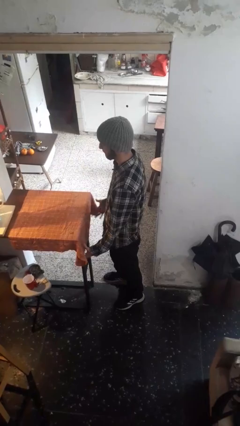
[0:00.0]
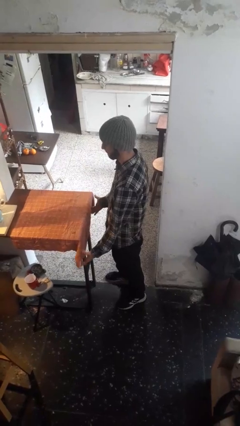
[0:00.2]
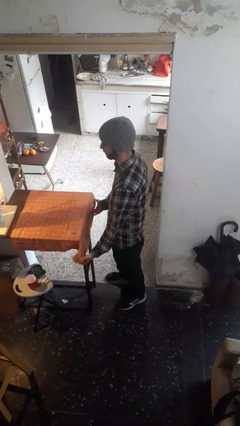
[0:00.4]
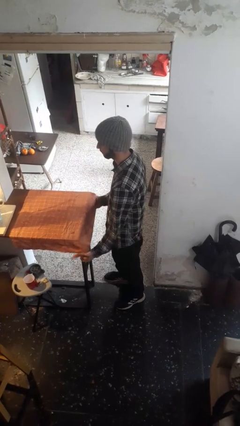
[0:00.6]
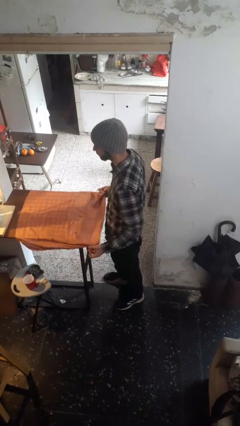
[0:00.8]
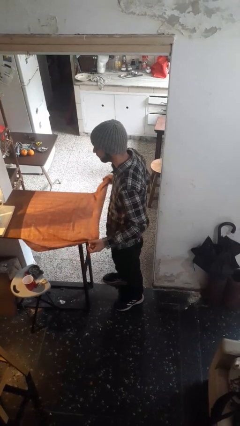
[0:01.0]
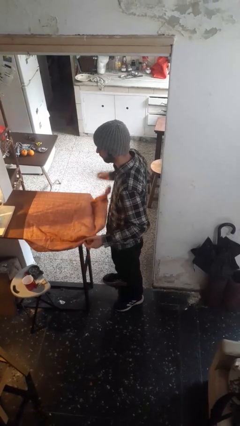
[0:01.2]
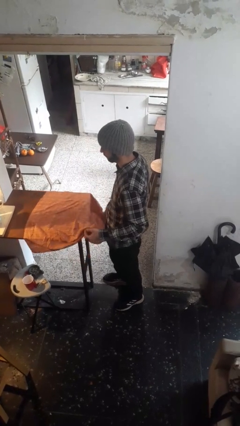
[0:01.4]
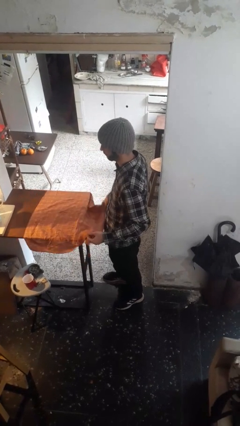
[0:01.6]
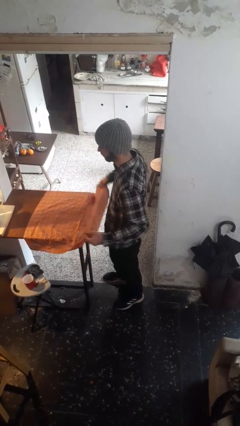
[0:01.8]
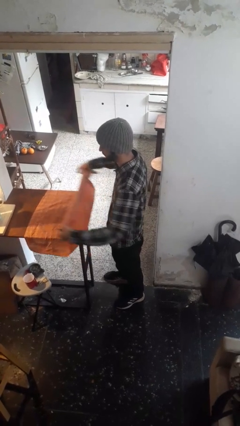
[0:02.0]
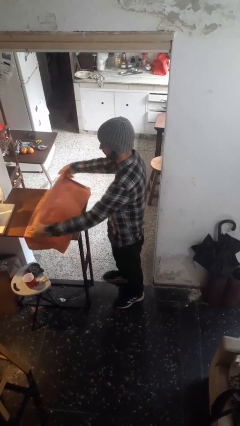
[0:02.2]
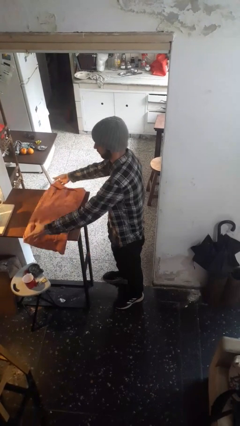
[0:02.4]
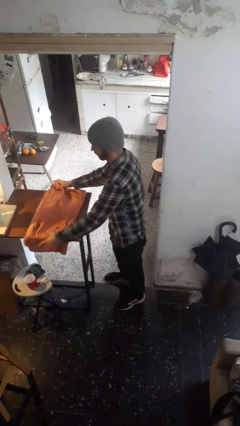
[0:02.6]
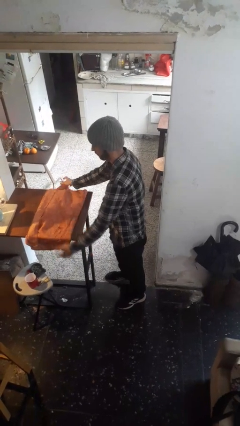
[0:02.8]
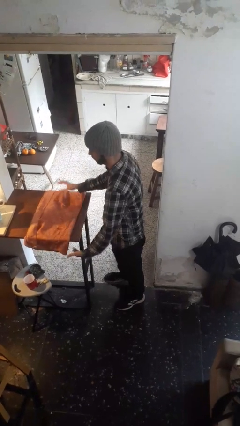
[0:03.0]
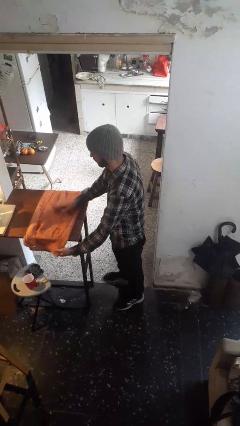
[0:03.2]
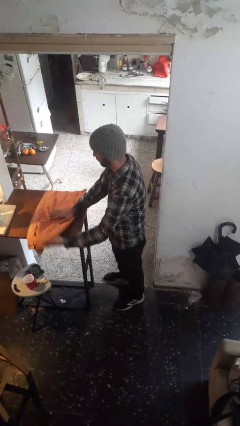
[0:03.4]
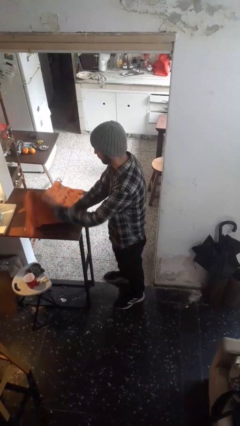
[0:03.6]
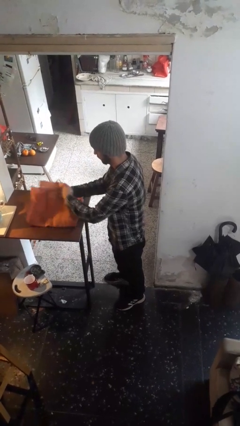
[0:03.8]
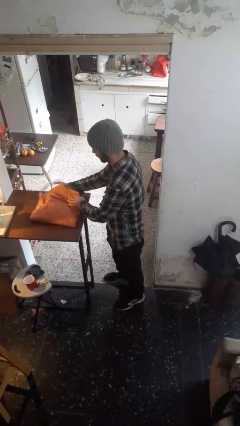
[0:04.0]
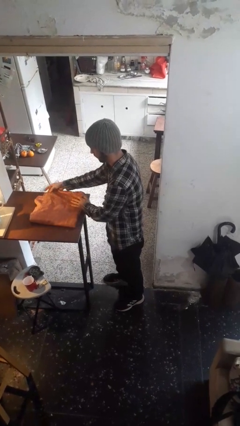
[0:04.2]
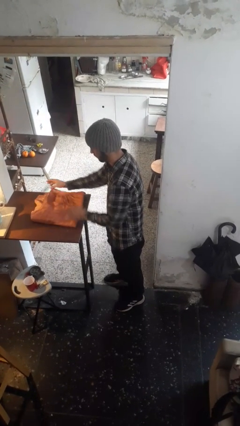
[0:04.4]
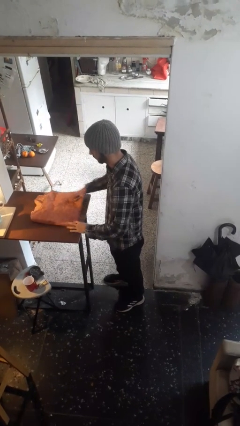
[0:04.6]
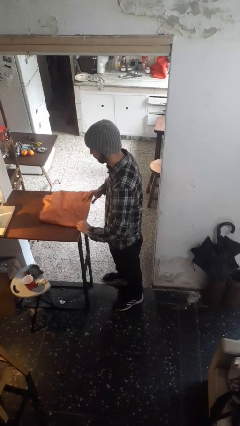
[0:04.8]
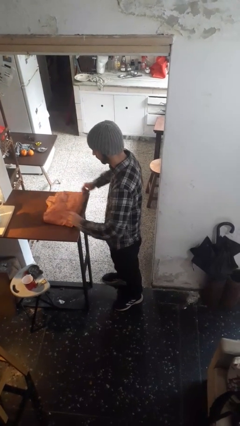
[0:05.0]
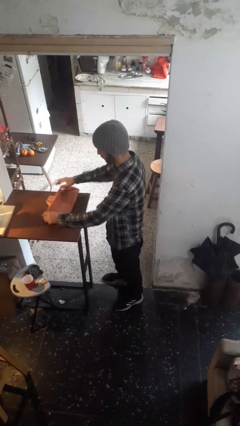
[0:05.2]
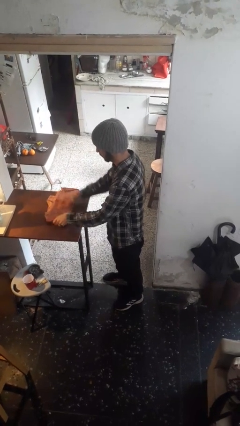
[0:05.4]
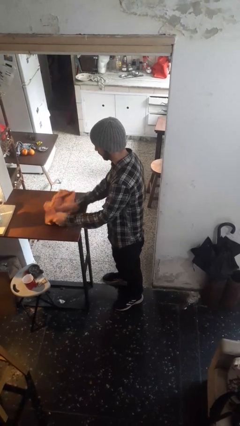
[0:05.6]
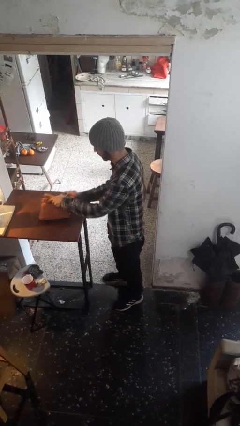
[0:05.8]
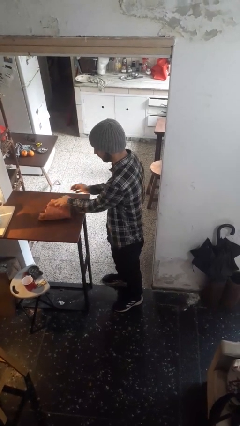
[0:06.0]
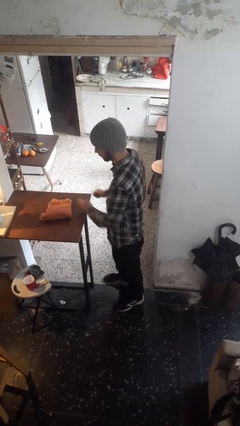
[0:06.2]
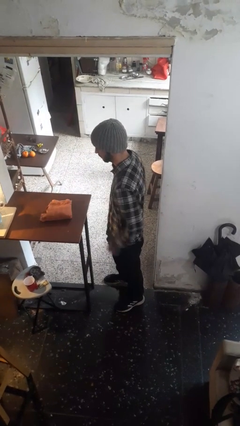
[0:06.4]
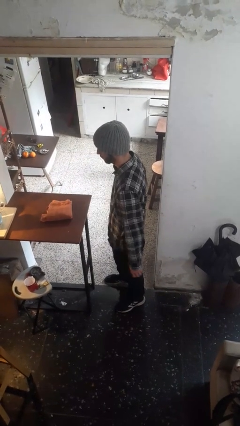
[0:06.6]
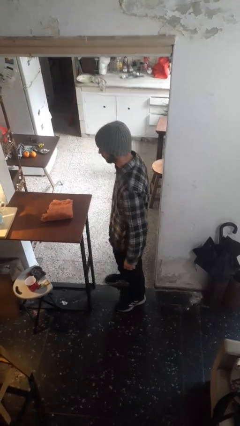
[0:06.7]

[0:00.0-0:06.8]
person folds tablecloth

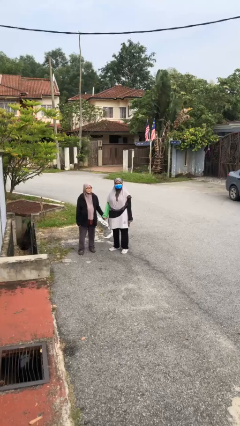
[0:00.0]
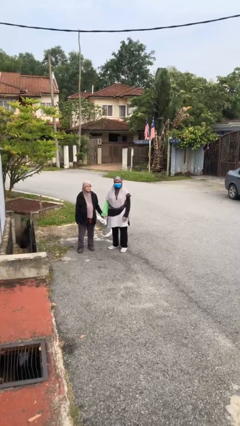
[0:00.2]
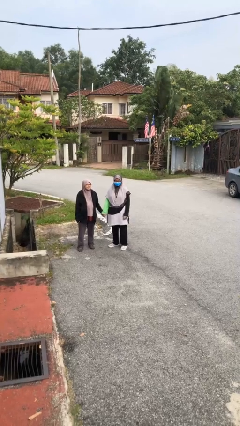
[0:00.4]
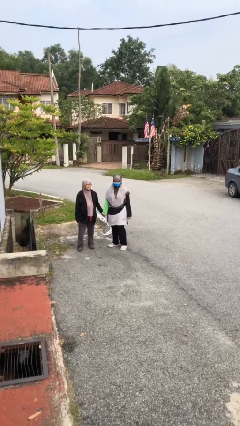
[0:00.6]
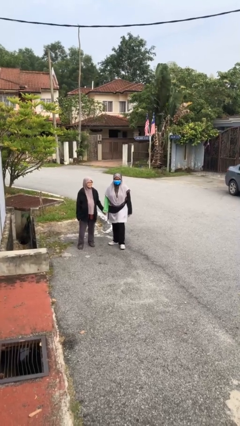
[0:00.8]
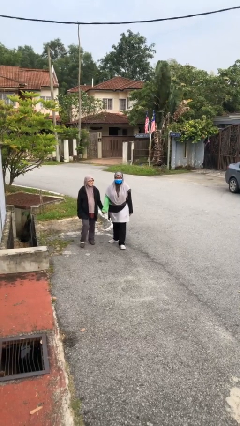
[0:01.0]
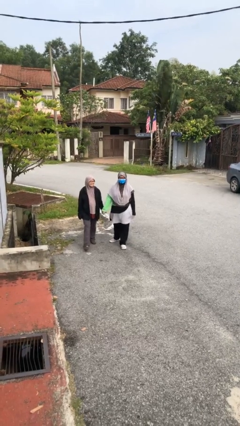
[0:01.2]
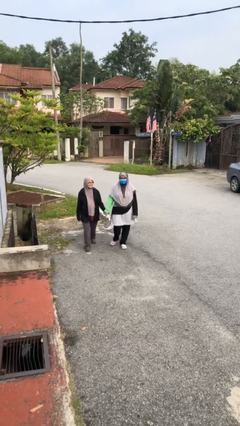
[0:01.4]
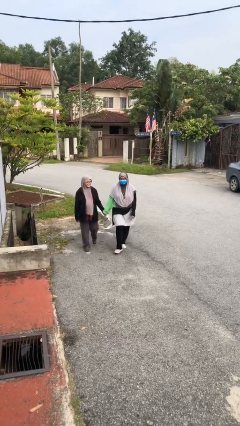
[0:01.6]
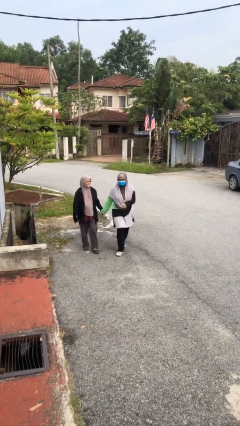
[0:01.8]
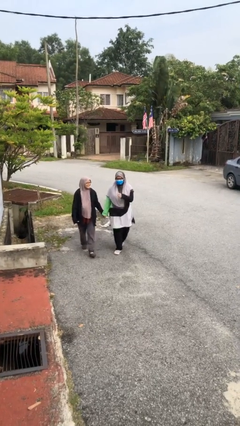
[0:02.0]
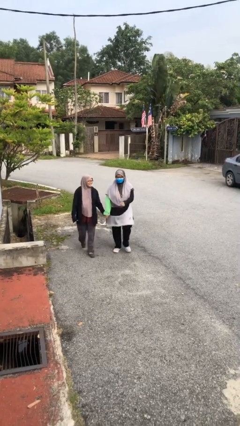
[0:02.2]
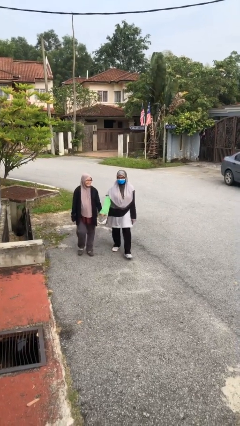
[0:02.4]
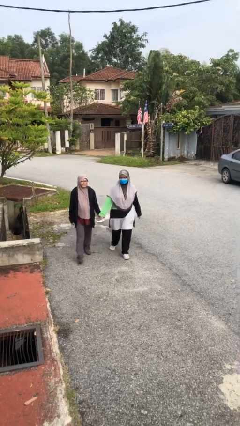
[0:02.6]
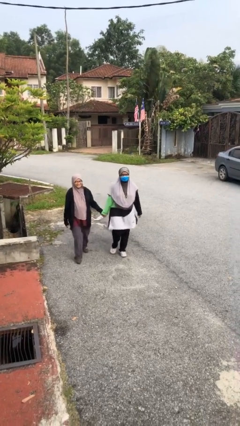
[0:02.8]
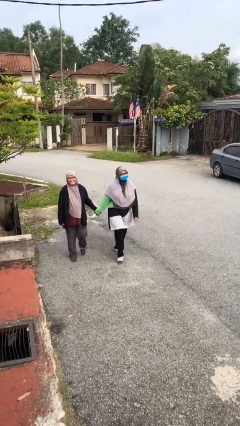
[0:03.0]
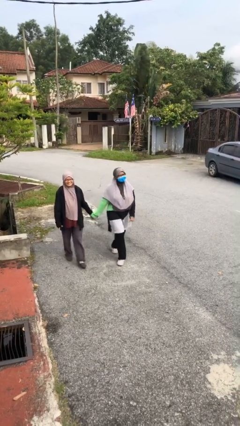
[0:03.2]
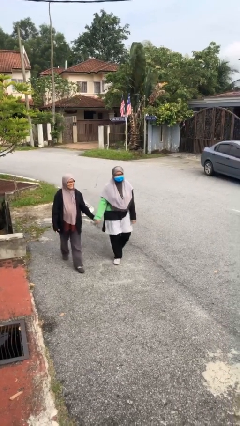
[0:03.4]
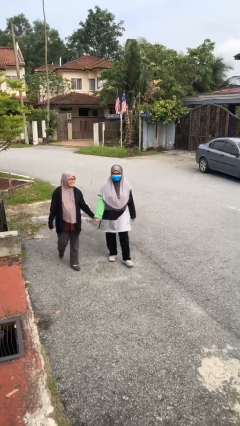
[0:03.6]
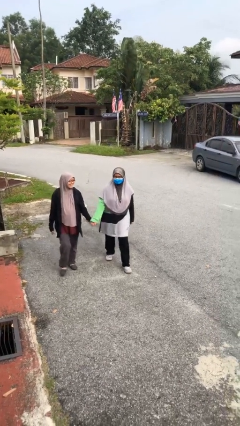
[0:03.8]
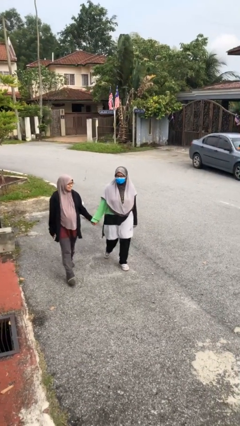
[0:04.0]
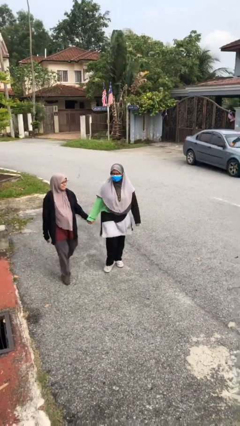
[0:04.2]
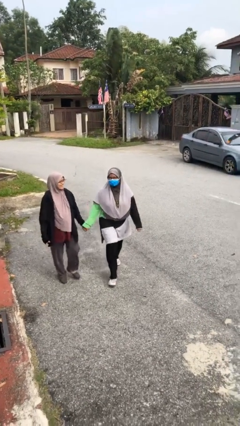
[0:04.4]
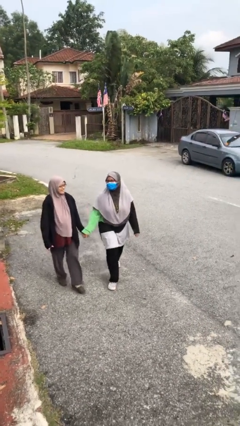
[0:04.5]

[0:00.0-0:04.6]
person holds hand

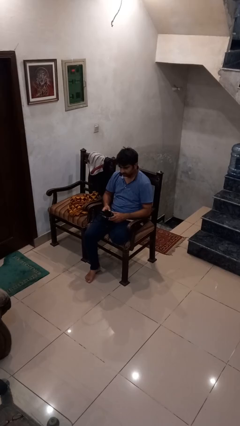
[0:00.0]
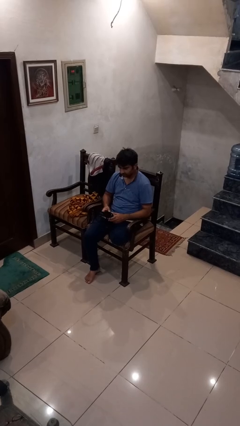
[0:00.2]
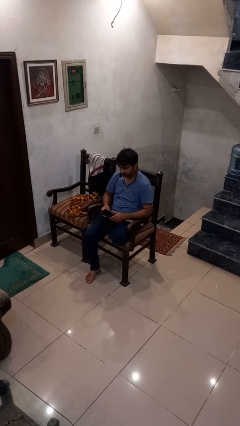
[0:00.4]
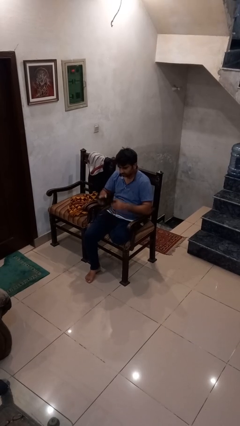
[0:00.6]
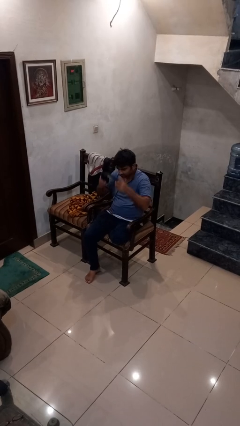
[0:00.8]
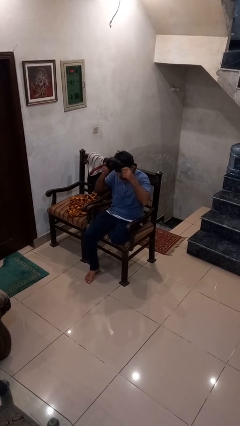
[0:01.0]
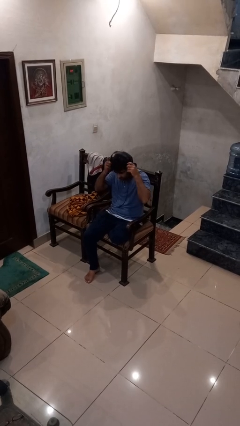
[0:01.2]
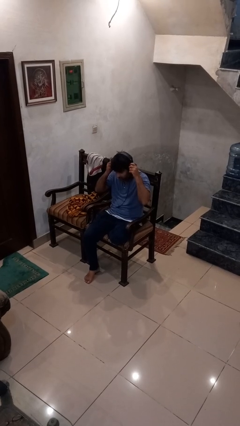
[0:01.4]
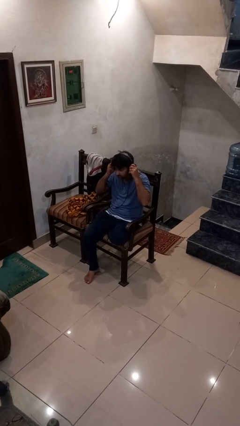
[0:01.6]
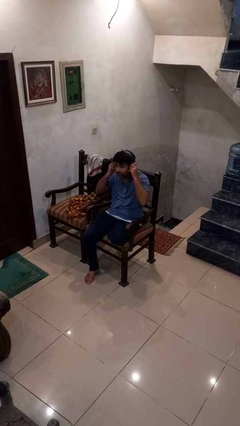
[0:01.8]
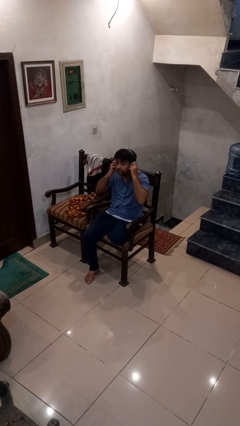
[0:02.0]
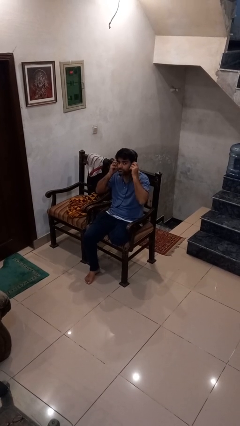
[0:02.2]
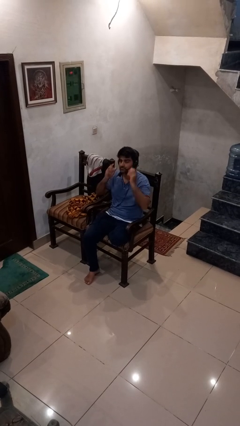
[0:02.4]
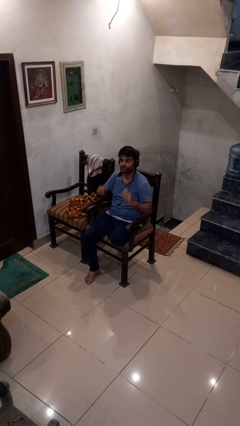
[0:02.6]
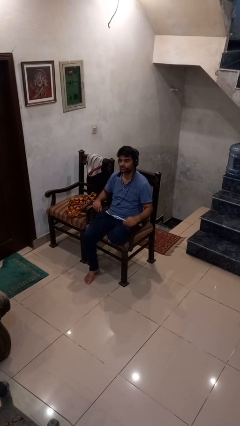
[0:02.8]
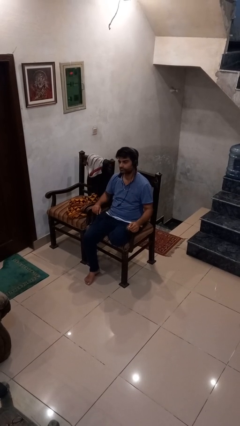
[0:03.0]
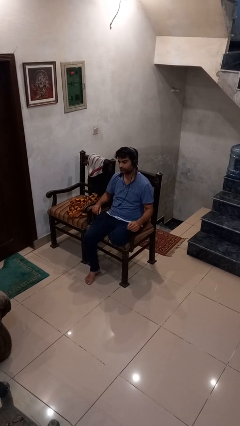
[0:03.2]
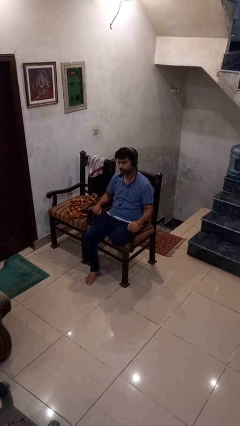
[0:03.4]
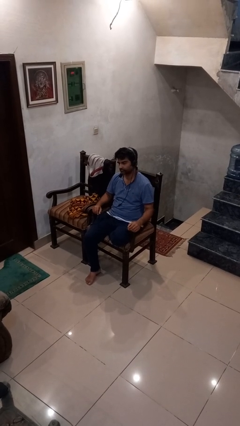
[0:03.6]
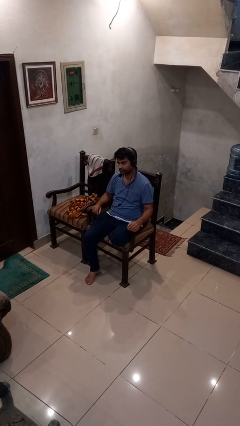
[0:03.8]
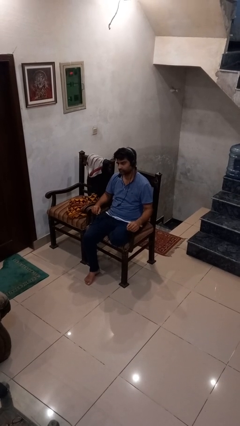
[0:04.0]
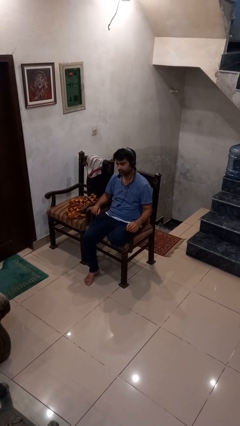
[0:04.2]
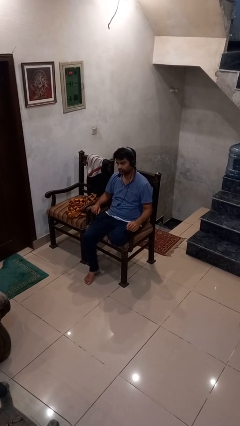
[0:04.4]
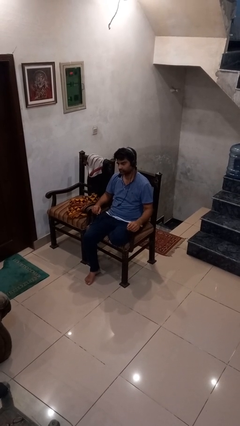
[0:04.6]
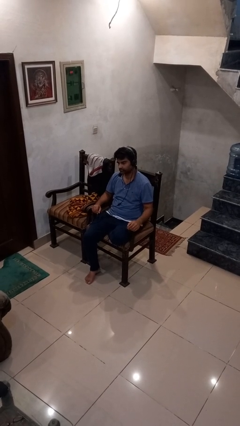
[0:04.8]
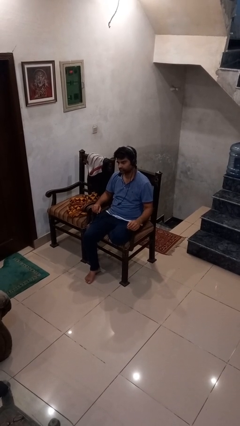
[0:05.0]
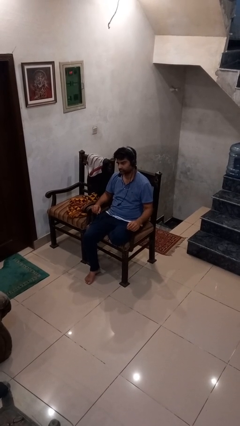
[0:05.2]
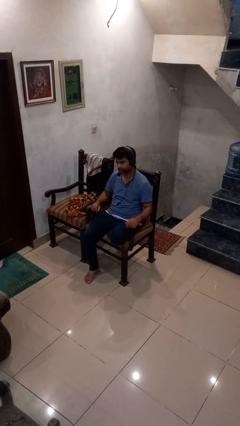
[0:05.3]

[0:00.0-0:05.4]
person puts on headphones

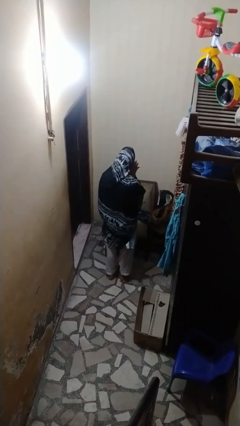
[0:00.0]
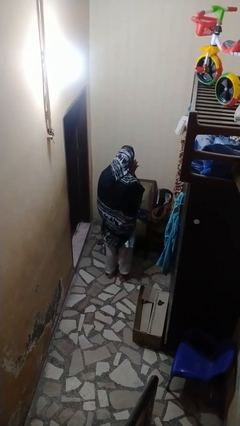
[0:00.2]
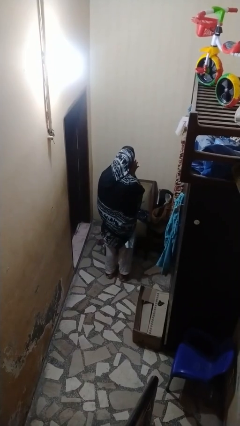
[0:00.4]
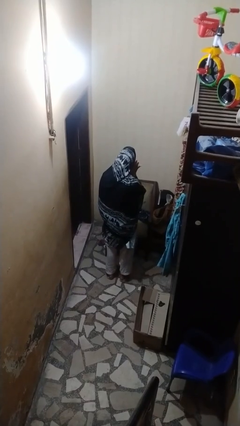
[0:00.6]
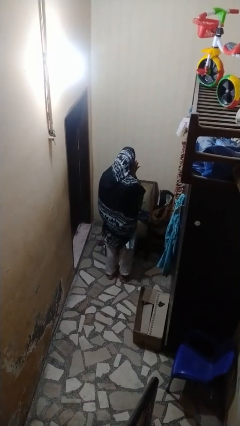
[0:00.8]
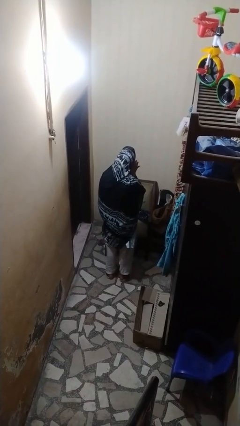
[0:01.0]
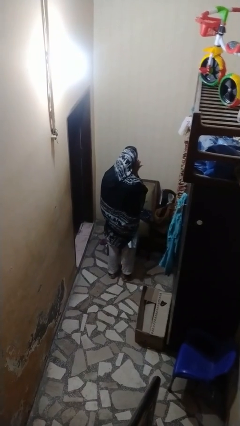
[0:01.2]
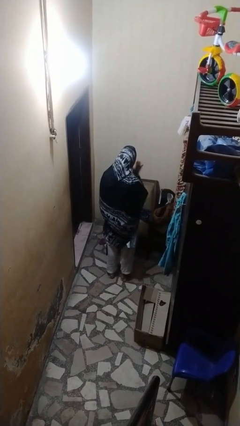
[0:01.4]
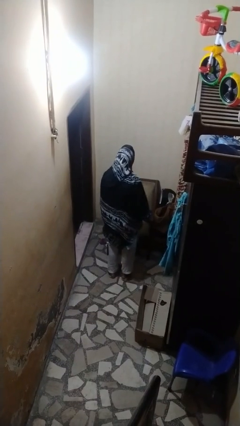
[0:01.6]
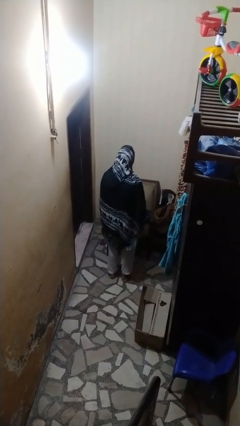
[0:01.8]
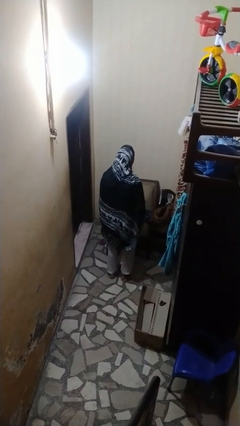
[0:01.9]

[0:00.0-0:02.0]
person gestures listen closely
